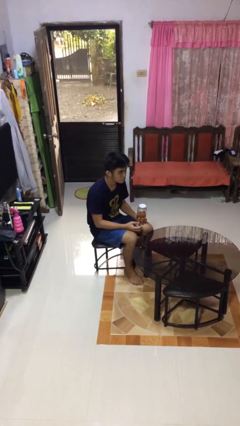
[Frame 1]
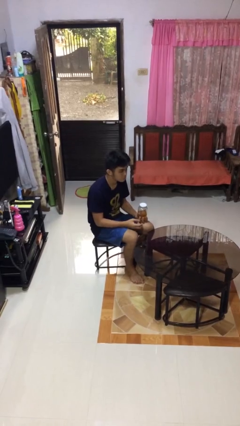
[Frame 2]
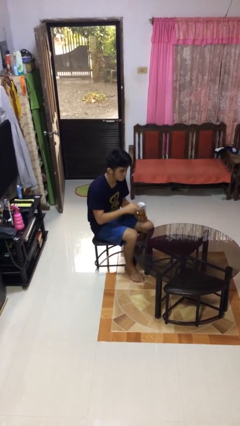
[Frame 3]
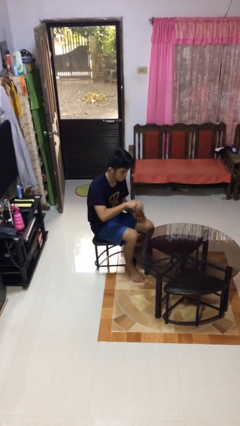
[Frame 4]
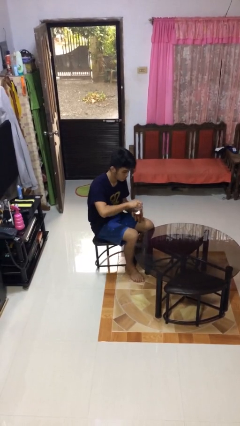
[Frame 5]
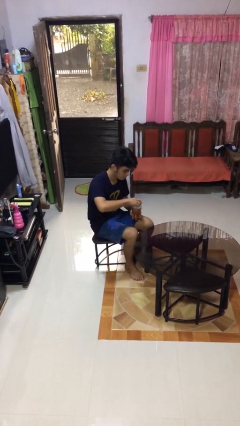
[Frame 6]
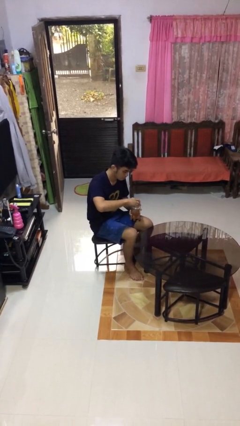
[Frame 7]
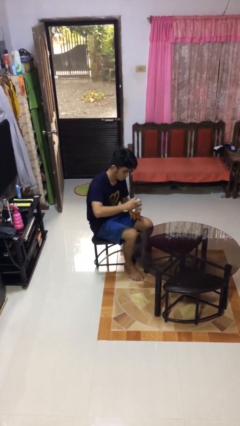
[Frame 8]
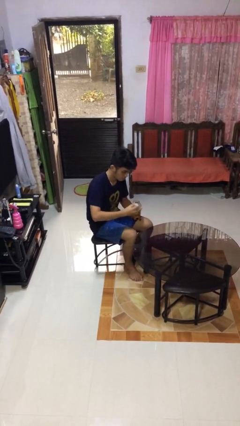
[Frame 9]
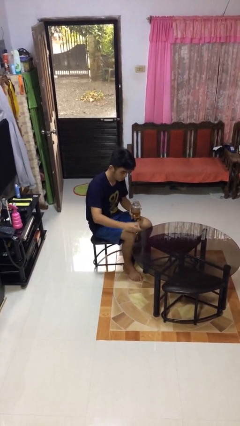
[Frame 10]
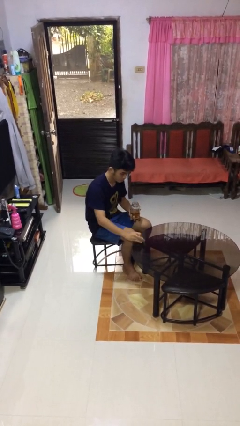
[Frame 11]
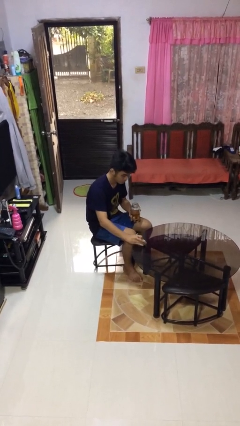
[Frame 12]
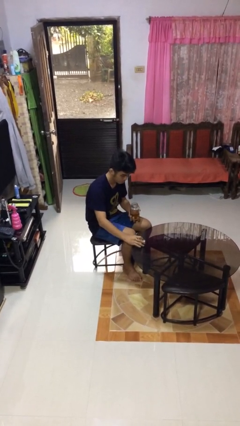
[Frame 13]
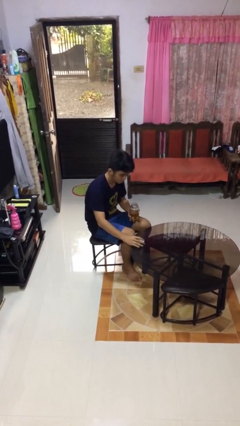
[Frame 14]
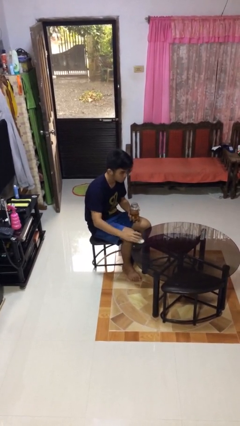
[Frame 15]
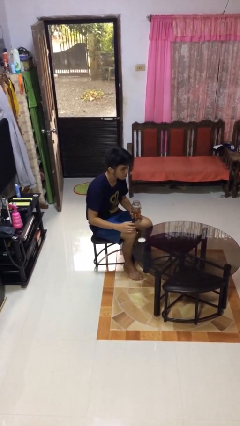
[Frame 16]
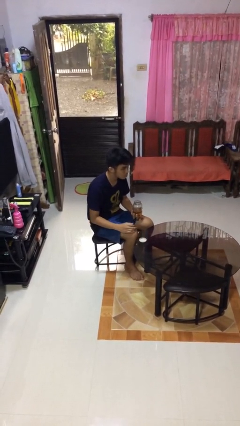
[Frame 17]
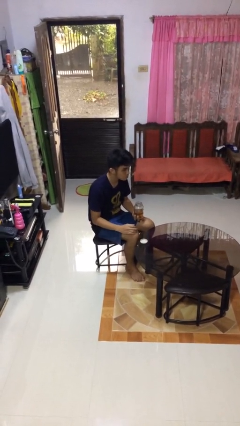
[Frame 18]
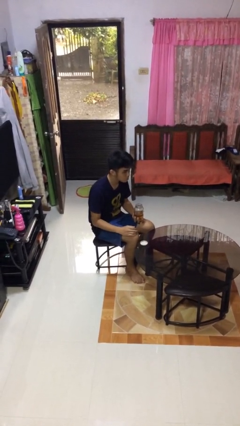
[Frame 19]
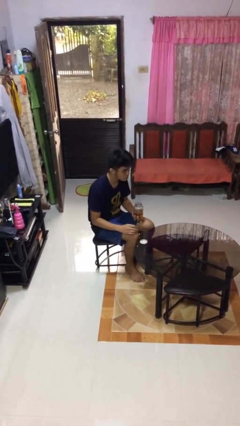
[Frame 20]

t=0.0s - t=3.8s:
person opens jar

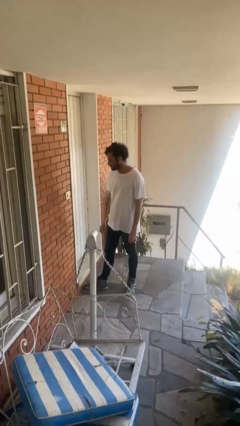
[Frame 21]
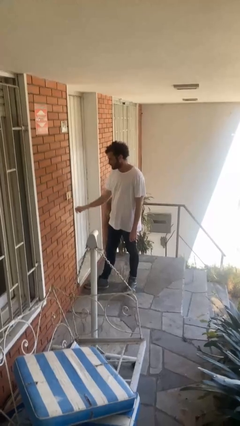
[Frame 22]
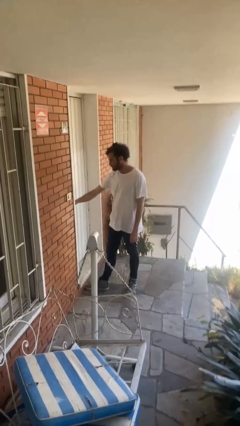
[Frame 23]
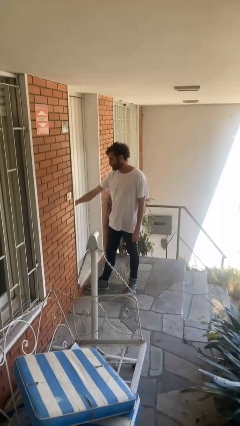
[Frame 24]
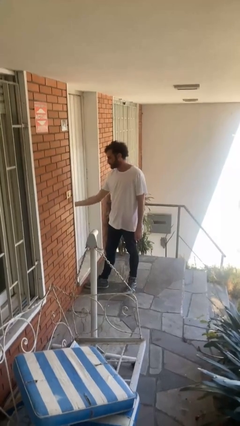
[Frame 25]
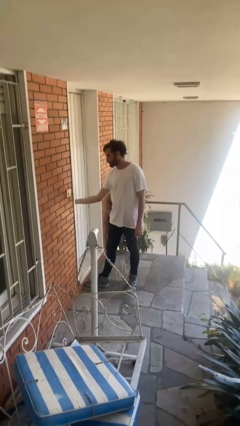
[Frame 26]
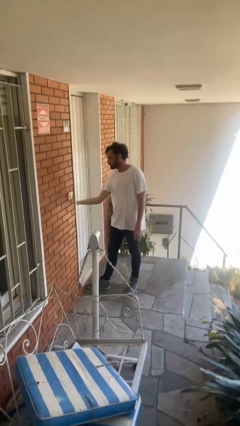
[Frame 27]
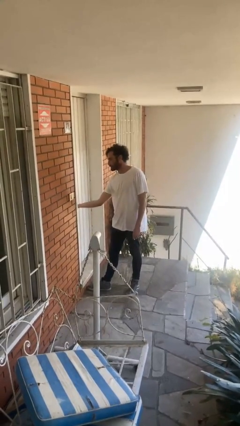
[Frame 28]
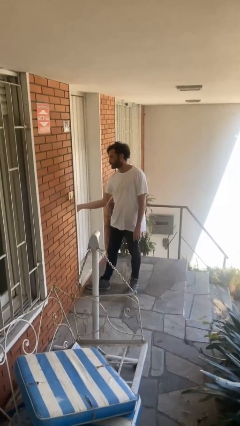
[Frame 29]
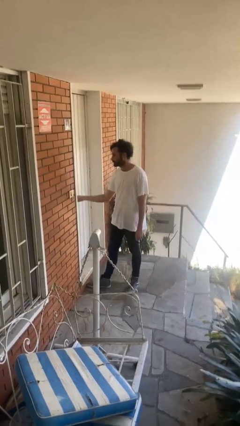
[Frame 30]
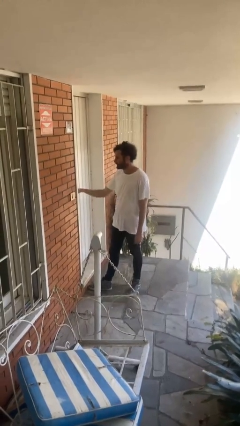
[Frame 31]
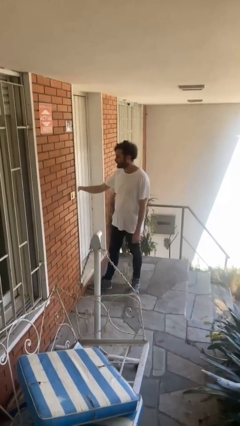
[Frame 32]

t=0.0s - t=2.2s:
person unlocks door with keys

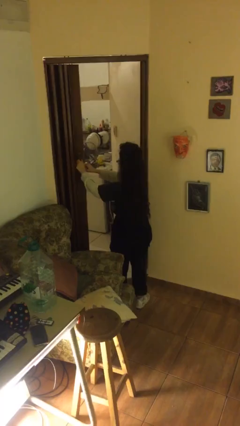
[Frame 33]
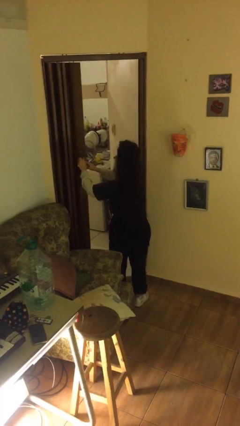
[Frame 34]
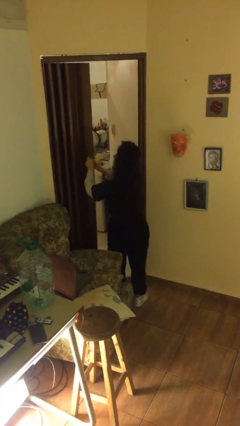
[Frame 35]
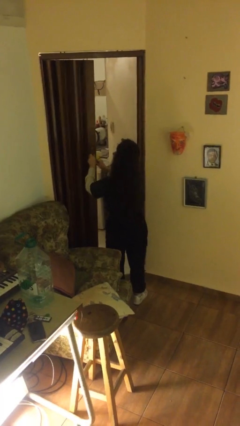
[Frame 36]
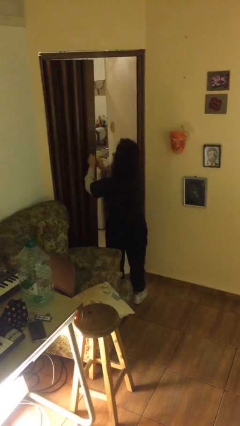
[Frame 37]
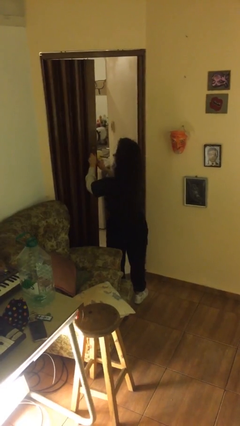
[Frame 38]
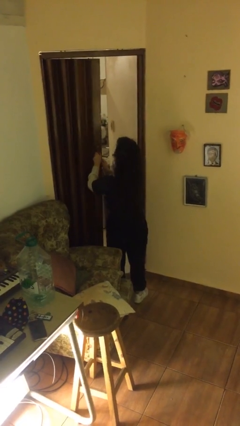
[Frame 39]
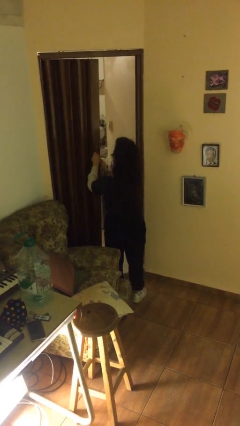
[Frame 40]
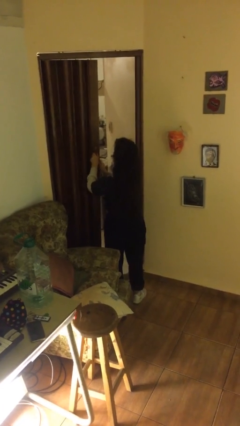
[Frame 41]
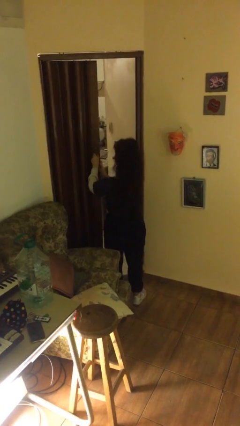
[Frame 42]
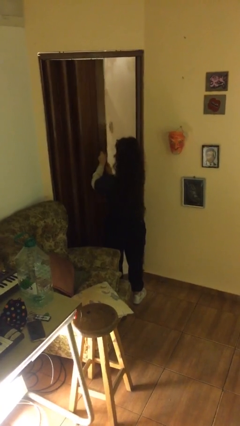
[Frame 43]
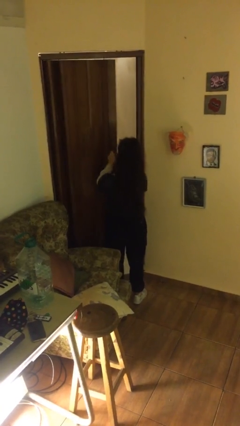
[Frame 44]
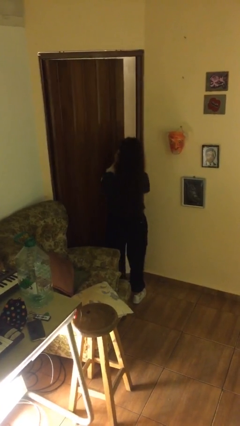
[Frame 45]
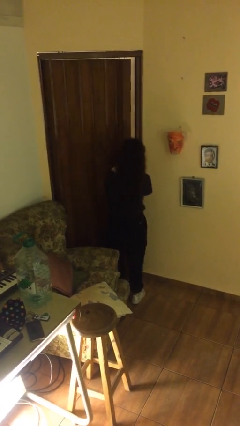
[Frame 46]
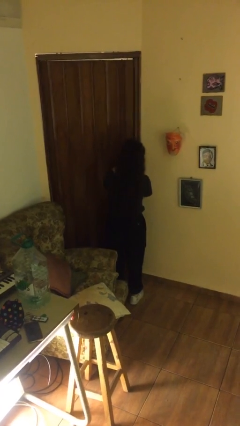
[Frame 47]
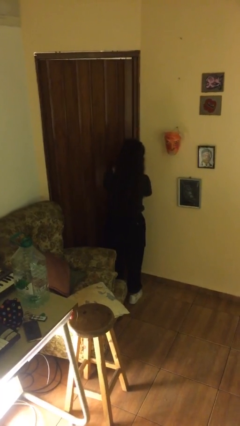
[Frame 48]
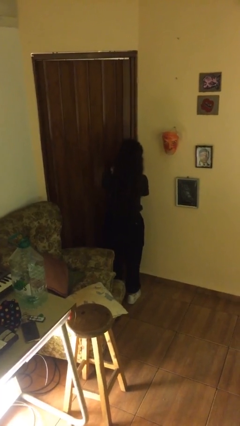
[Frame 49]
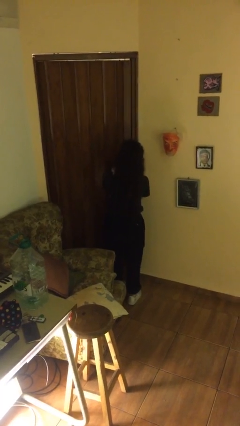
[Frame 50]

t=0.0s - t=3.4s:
person closes sliding door

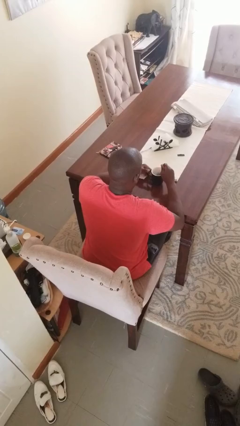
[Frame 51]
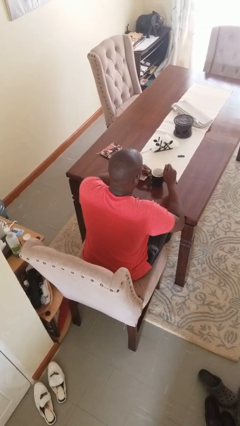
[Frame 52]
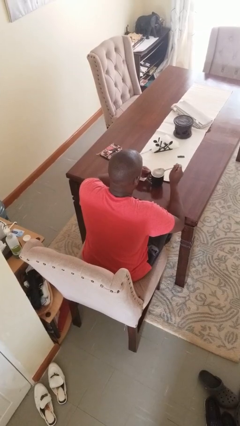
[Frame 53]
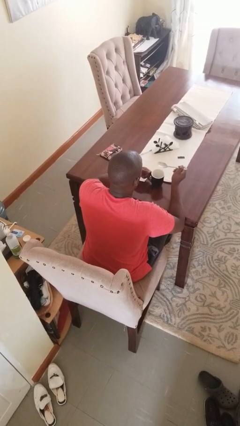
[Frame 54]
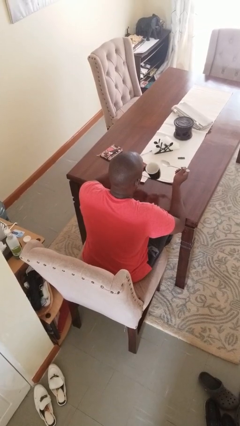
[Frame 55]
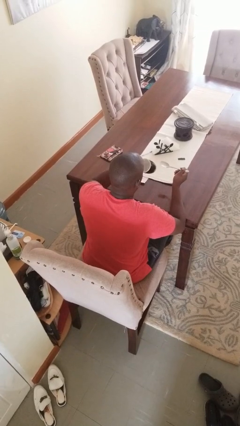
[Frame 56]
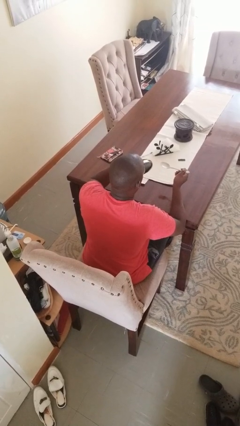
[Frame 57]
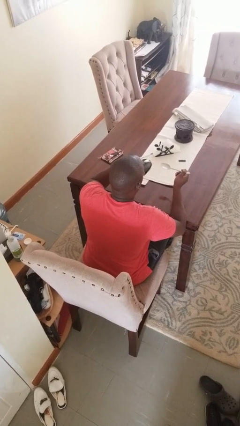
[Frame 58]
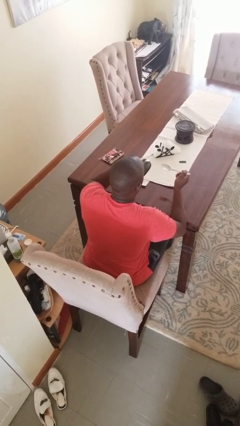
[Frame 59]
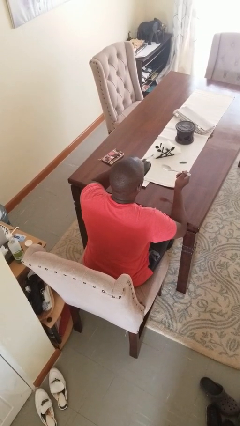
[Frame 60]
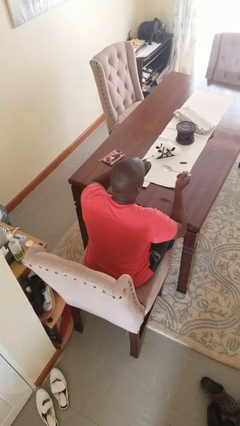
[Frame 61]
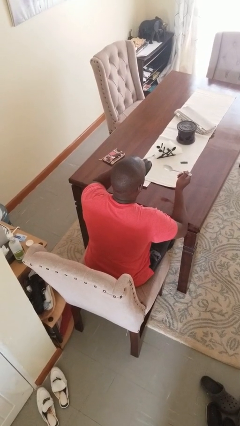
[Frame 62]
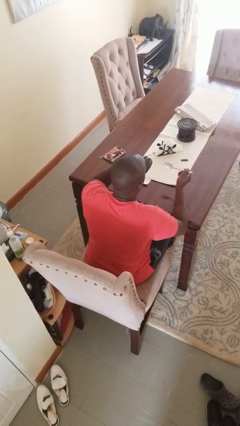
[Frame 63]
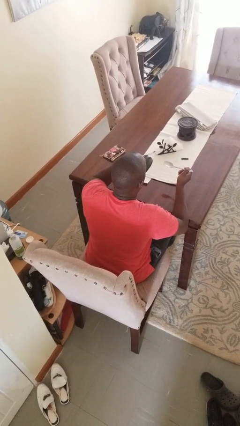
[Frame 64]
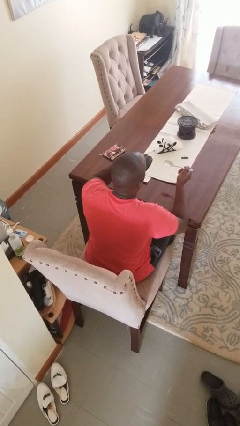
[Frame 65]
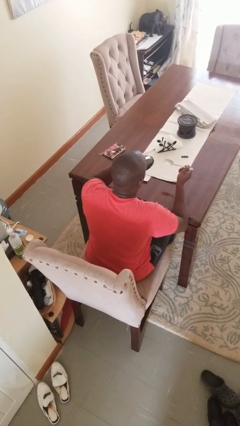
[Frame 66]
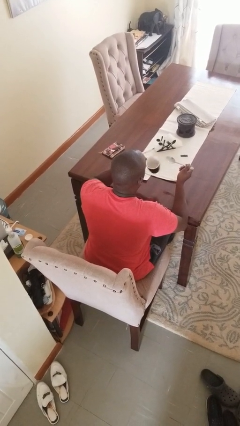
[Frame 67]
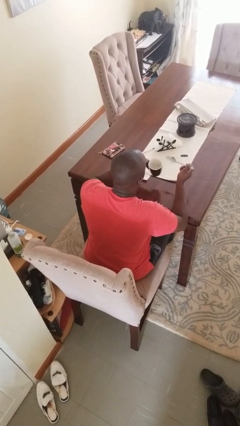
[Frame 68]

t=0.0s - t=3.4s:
person drinks from mug

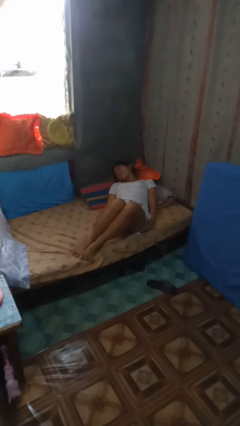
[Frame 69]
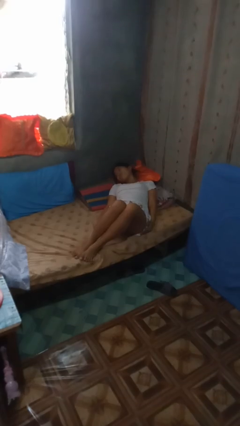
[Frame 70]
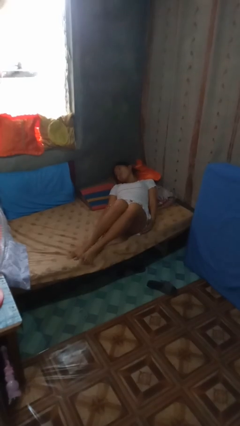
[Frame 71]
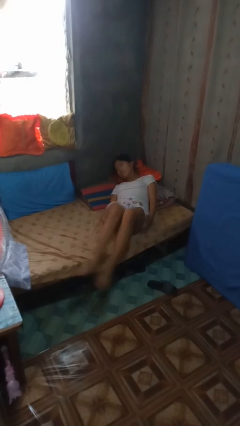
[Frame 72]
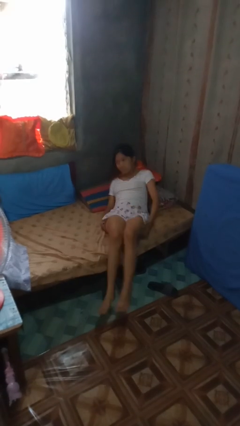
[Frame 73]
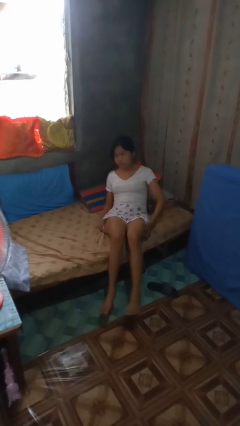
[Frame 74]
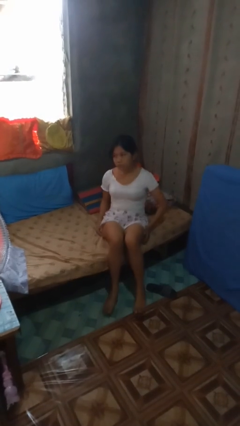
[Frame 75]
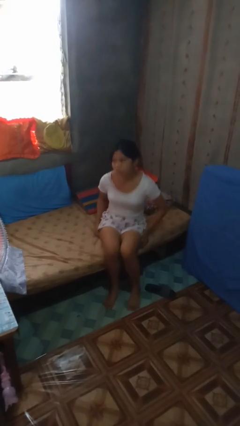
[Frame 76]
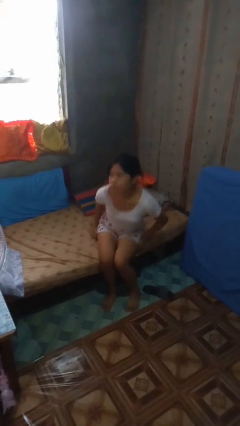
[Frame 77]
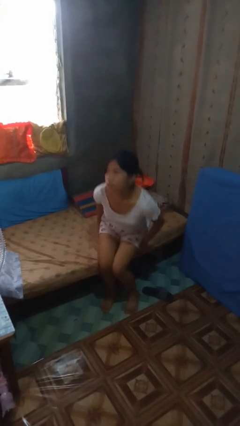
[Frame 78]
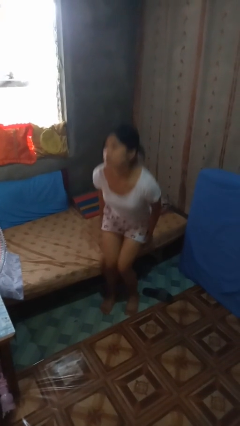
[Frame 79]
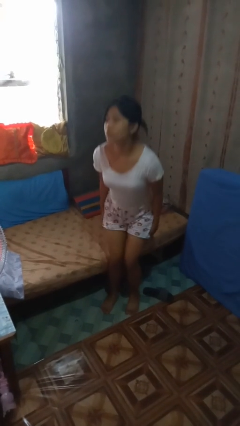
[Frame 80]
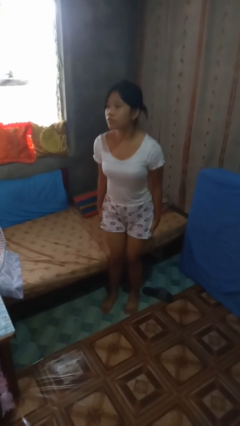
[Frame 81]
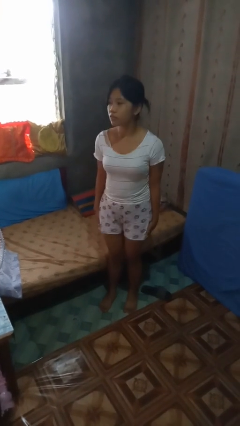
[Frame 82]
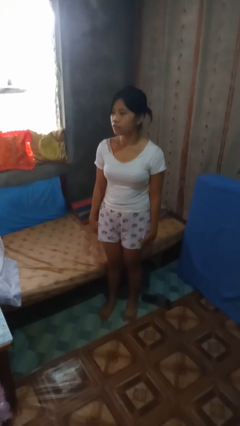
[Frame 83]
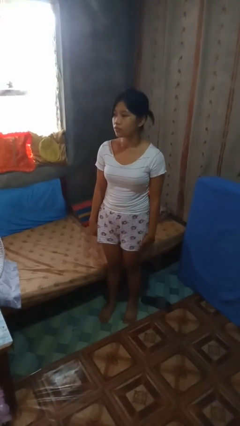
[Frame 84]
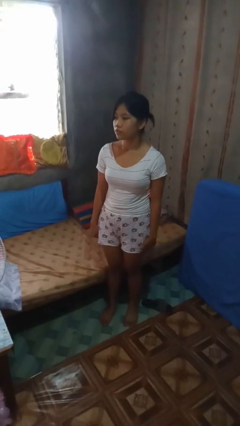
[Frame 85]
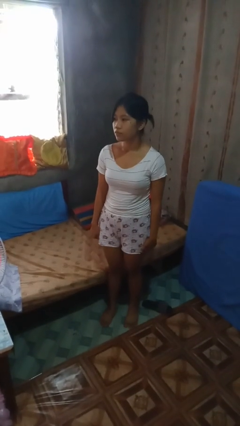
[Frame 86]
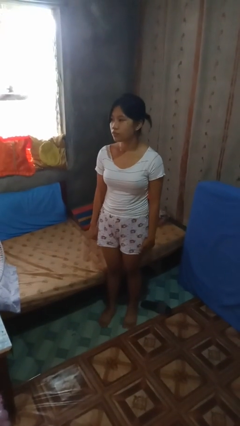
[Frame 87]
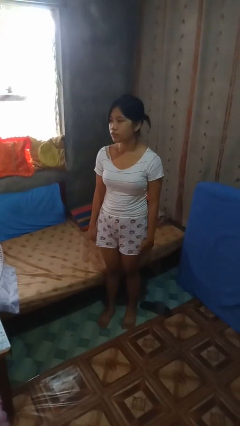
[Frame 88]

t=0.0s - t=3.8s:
person stands up

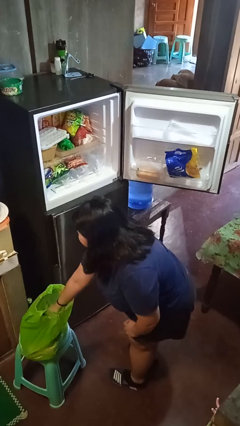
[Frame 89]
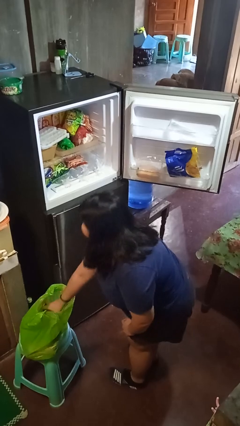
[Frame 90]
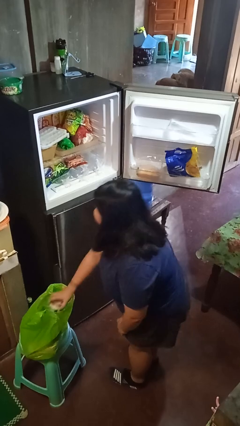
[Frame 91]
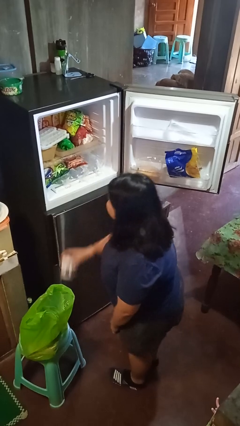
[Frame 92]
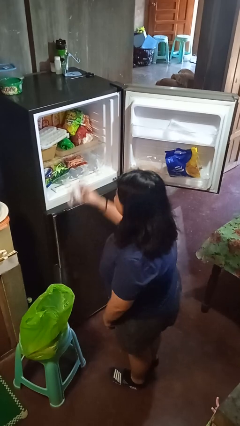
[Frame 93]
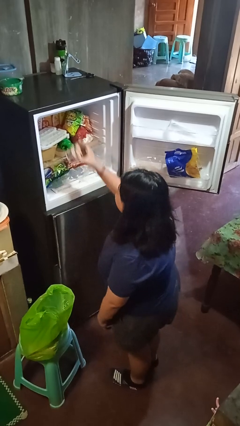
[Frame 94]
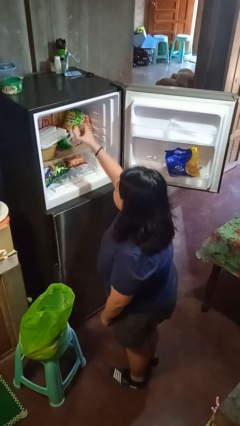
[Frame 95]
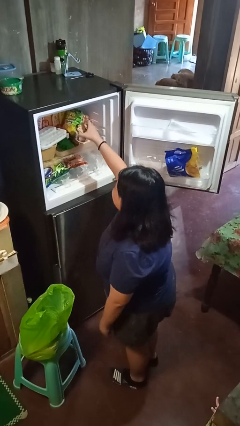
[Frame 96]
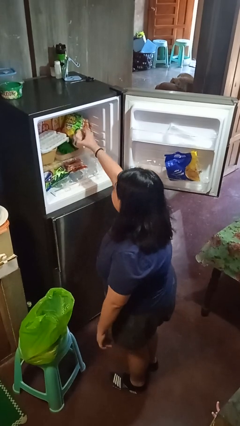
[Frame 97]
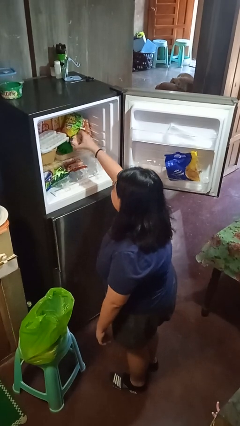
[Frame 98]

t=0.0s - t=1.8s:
person loads groceries into refrigerator
